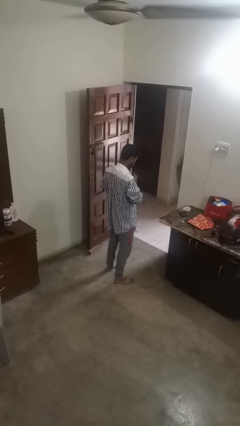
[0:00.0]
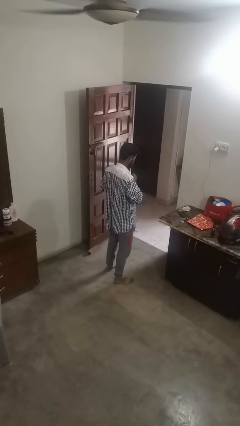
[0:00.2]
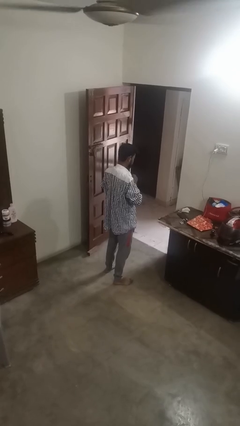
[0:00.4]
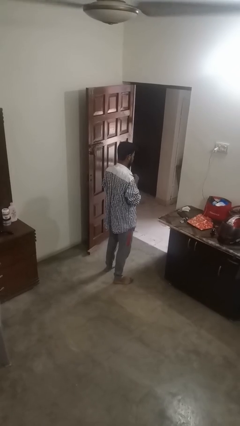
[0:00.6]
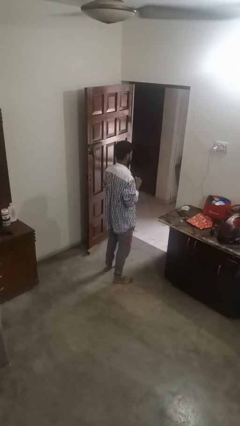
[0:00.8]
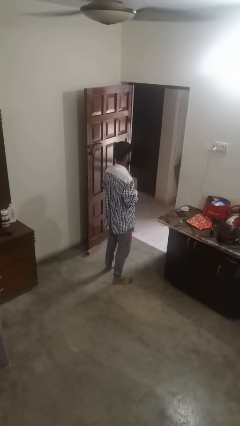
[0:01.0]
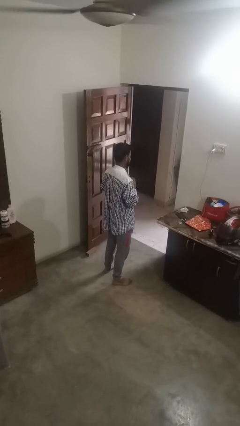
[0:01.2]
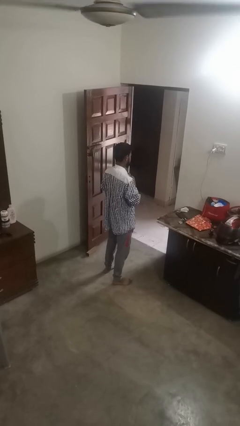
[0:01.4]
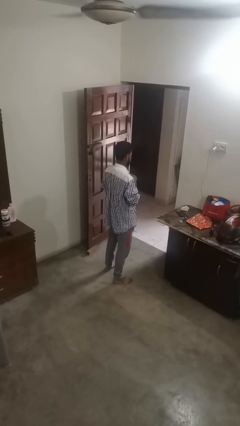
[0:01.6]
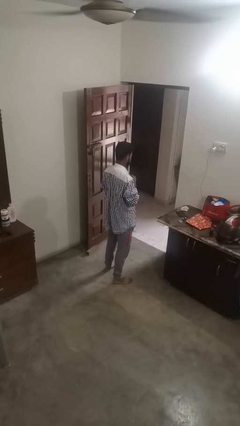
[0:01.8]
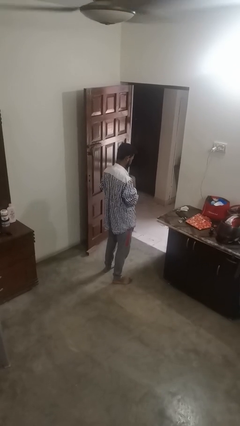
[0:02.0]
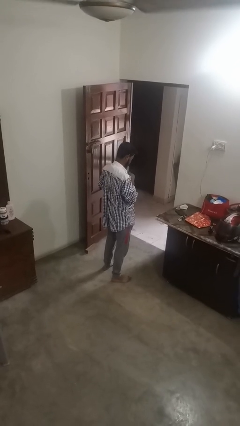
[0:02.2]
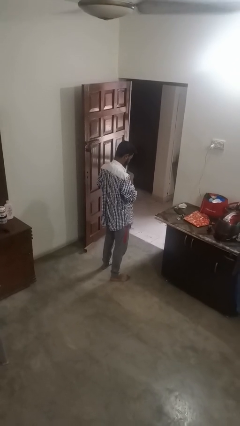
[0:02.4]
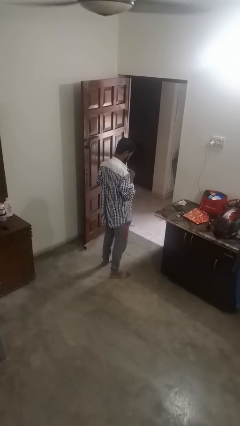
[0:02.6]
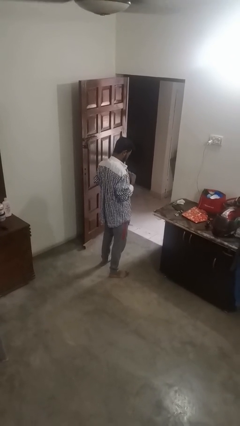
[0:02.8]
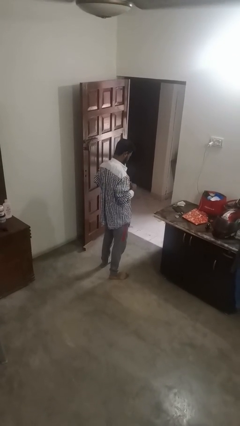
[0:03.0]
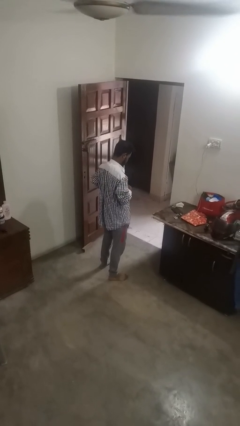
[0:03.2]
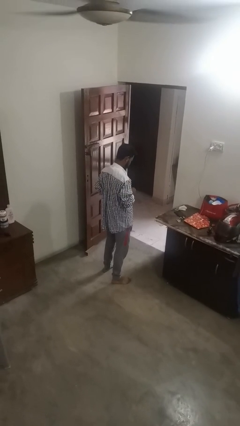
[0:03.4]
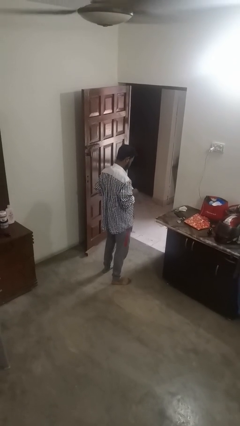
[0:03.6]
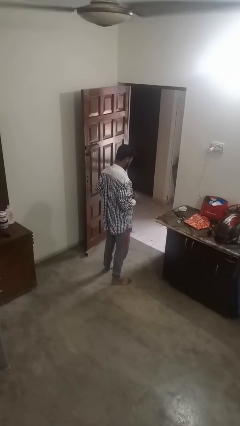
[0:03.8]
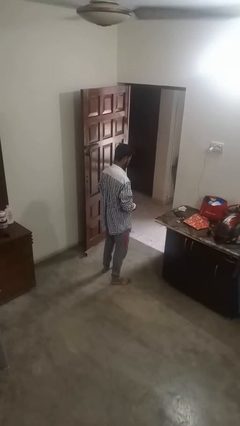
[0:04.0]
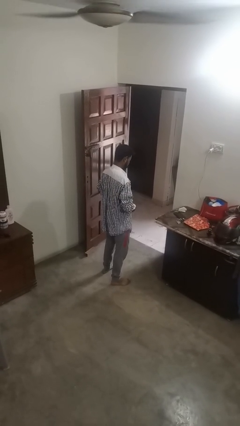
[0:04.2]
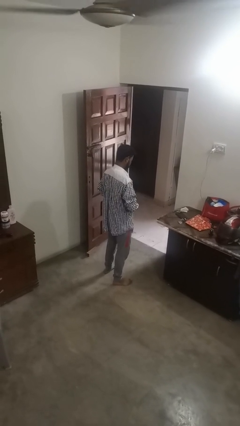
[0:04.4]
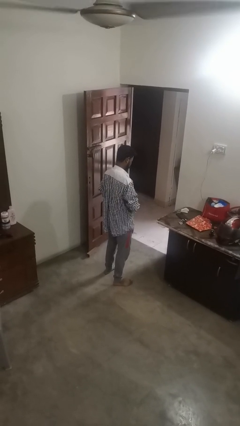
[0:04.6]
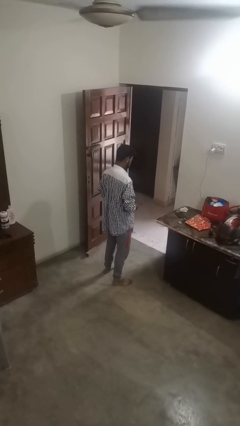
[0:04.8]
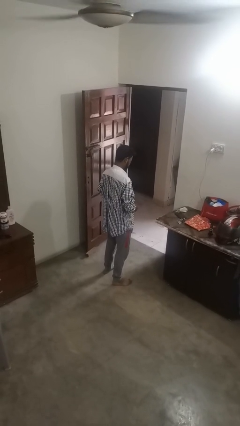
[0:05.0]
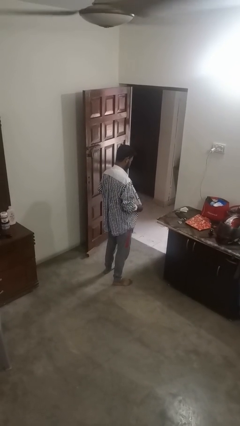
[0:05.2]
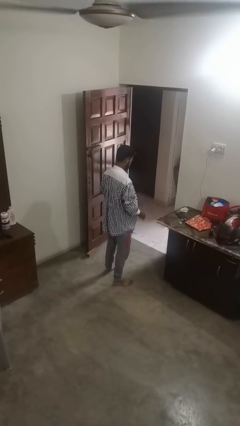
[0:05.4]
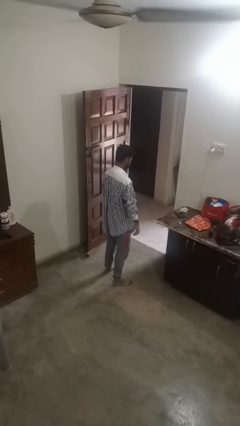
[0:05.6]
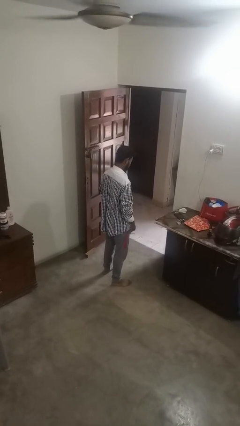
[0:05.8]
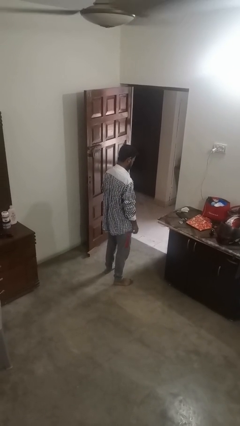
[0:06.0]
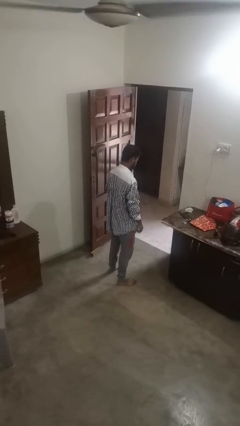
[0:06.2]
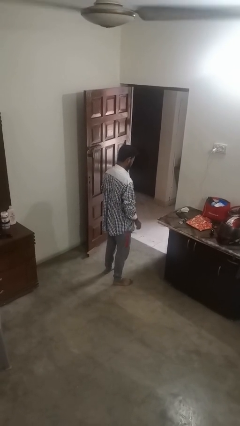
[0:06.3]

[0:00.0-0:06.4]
person unbuttons shirt

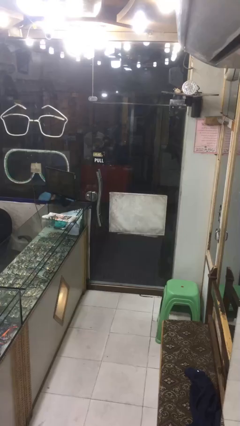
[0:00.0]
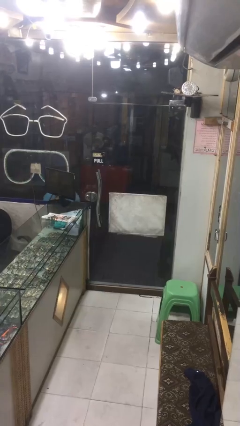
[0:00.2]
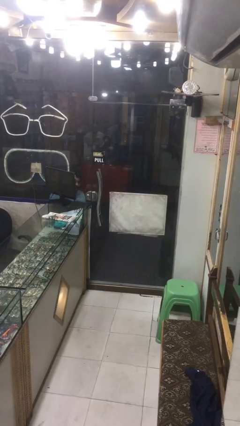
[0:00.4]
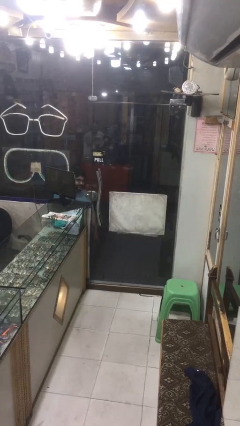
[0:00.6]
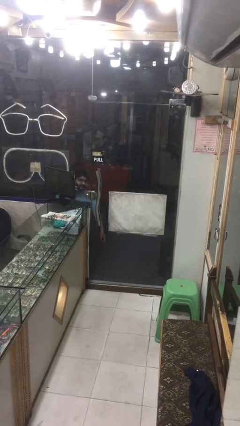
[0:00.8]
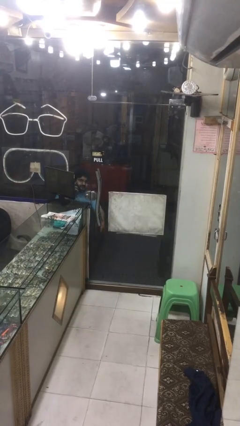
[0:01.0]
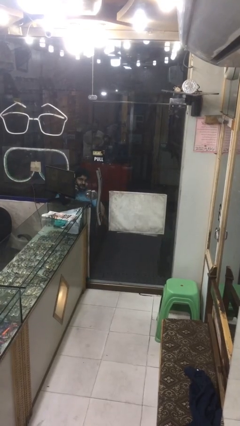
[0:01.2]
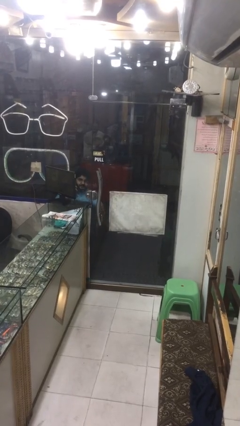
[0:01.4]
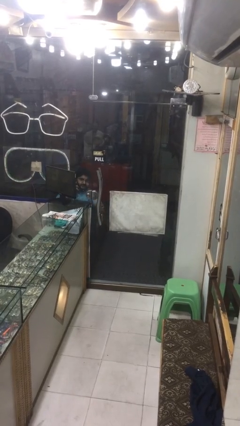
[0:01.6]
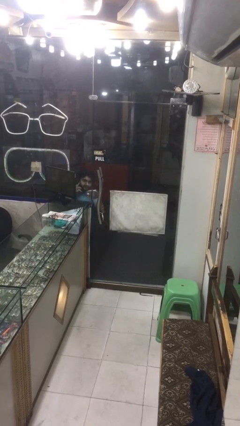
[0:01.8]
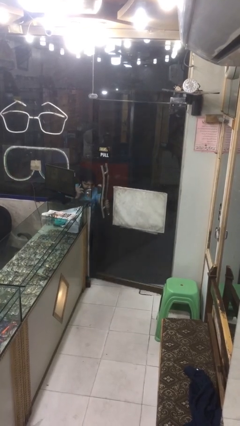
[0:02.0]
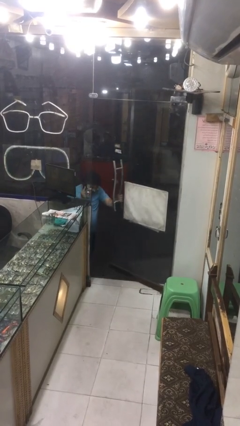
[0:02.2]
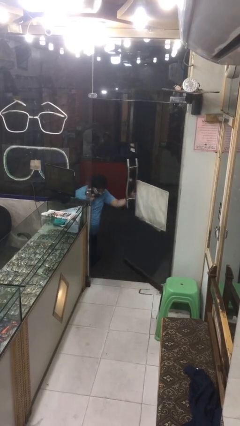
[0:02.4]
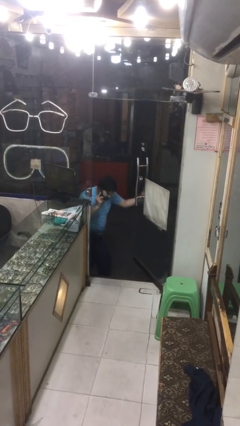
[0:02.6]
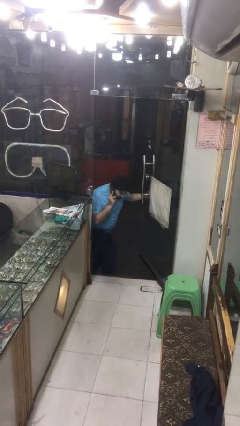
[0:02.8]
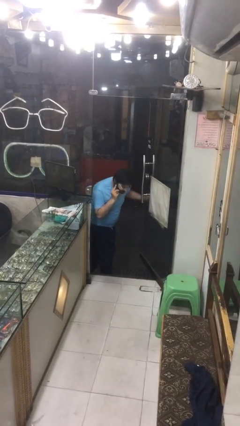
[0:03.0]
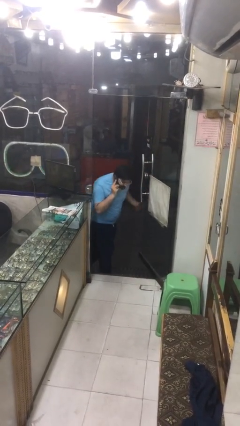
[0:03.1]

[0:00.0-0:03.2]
person opens facility door

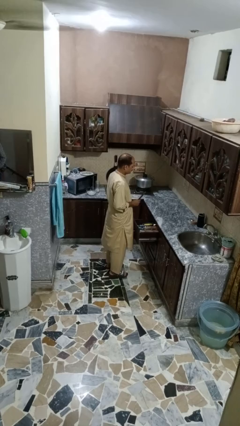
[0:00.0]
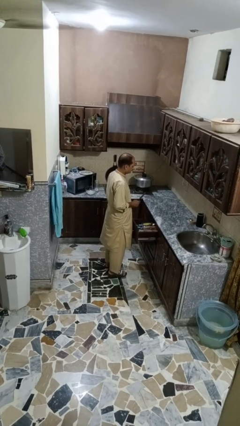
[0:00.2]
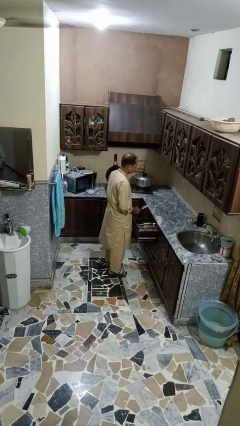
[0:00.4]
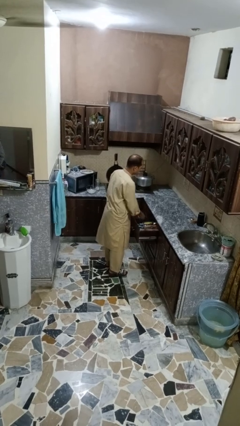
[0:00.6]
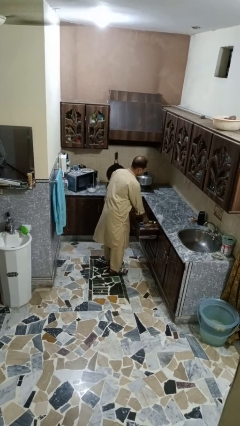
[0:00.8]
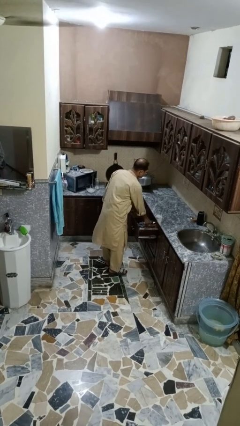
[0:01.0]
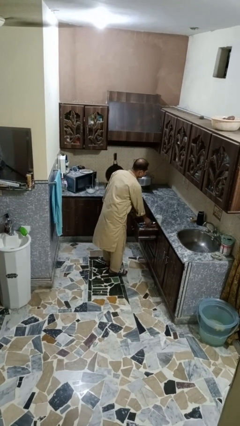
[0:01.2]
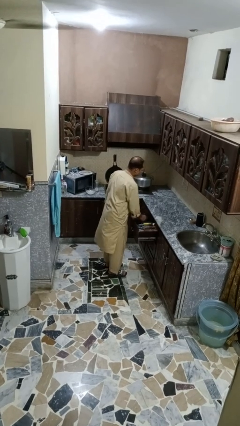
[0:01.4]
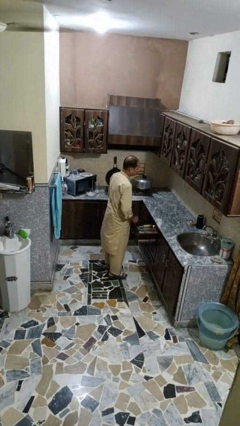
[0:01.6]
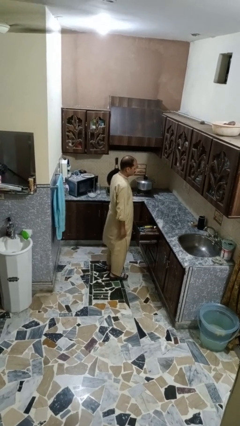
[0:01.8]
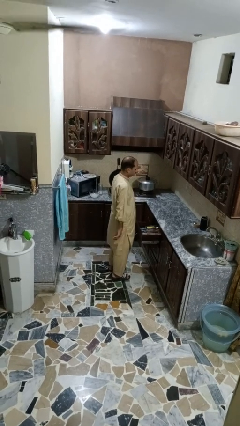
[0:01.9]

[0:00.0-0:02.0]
person puts object into kitchen drawer

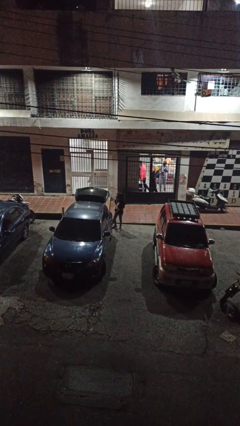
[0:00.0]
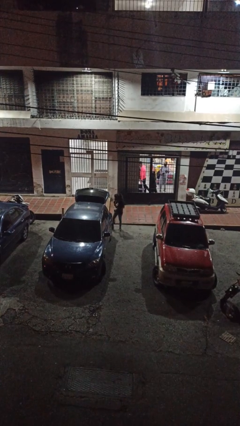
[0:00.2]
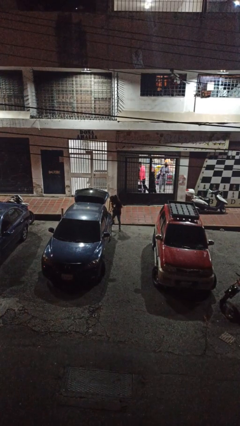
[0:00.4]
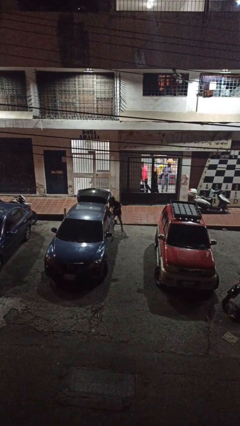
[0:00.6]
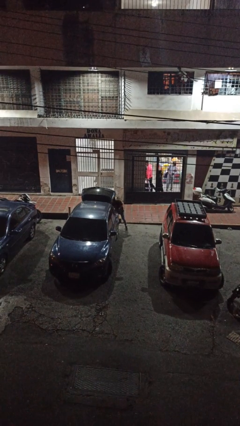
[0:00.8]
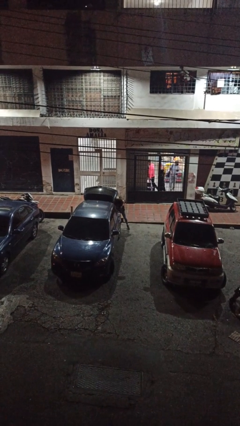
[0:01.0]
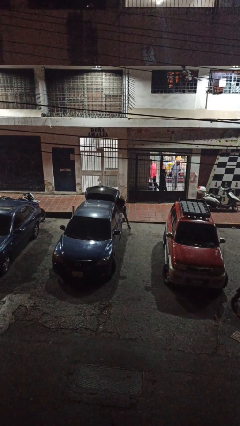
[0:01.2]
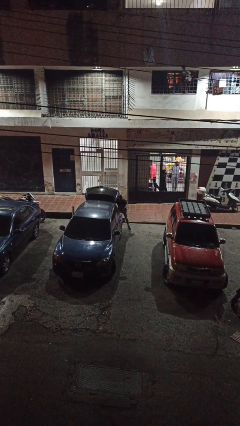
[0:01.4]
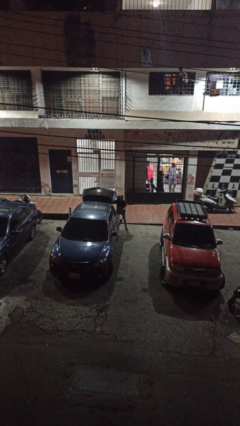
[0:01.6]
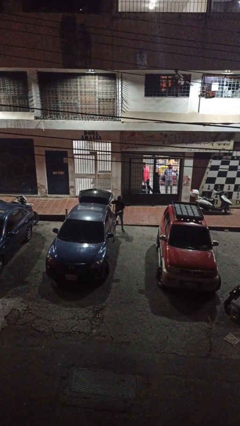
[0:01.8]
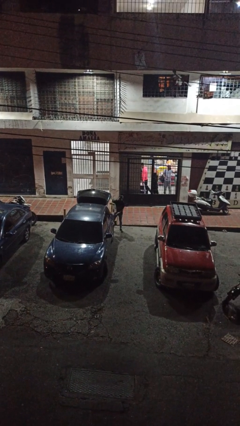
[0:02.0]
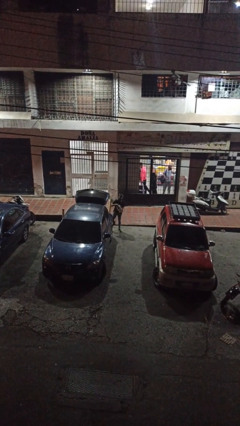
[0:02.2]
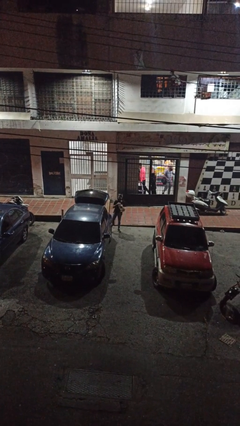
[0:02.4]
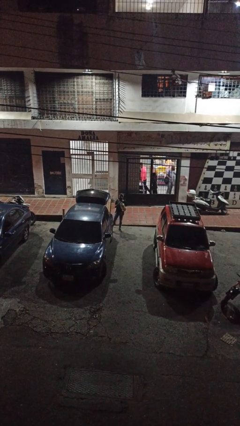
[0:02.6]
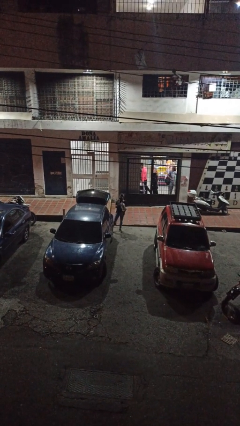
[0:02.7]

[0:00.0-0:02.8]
person unloads car

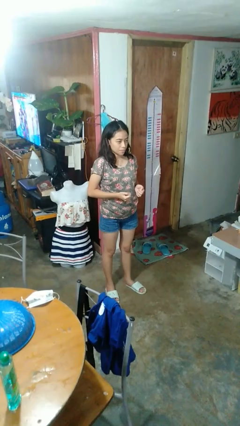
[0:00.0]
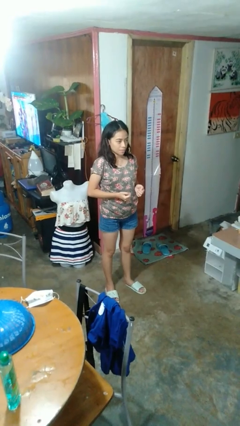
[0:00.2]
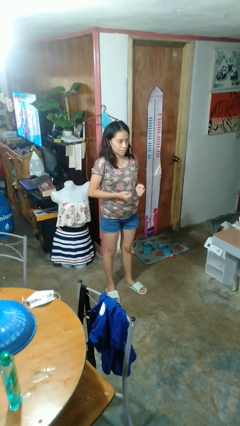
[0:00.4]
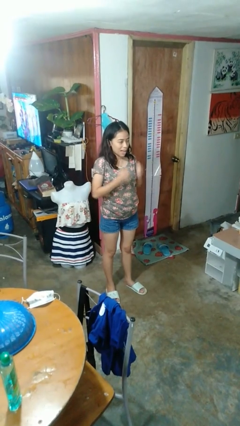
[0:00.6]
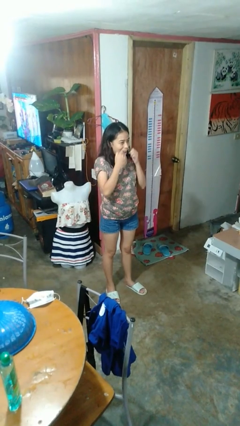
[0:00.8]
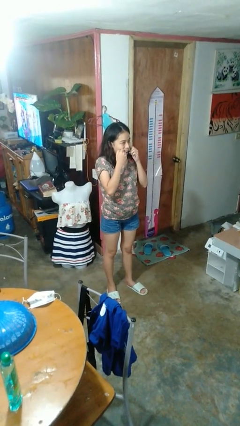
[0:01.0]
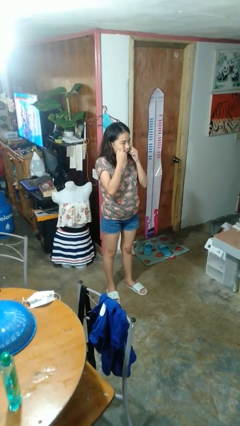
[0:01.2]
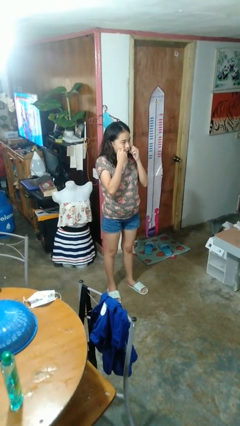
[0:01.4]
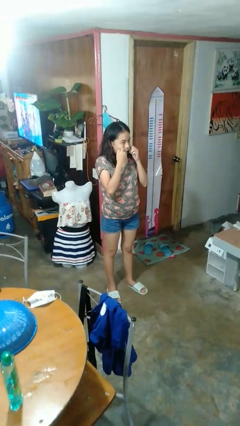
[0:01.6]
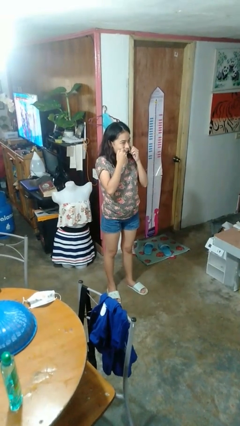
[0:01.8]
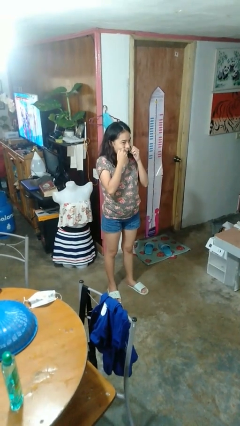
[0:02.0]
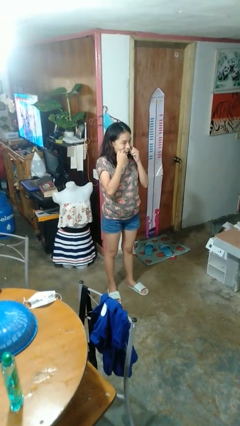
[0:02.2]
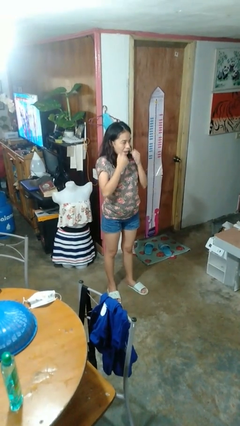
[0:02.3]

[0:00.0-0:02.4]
person flosses

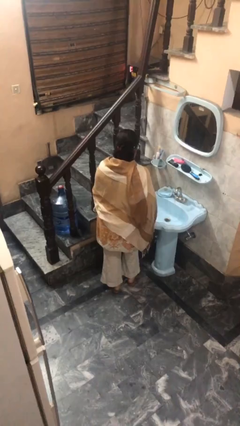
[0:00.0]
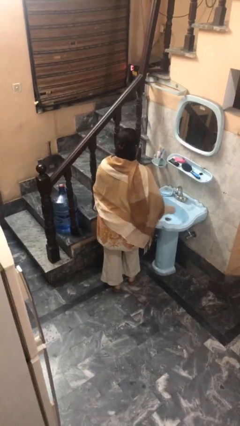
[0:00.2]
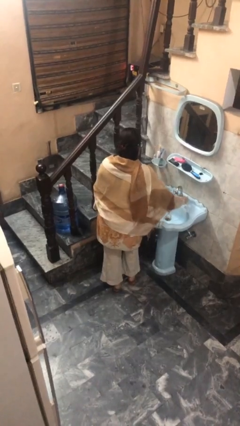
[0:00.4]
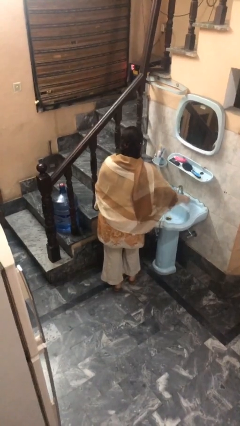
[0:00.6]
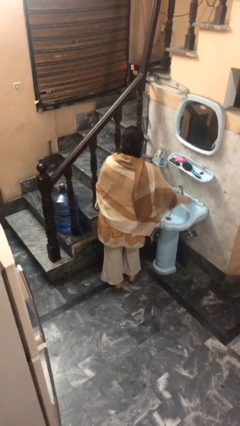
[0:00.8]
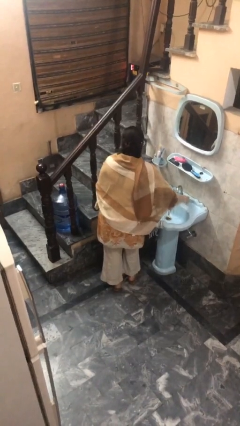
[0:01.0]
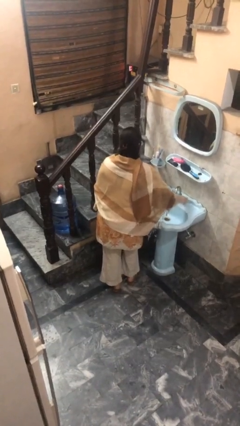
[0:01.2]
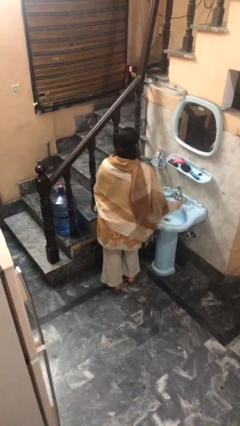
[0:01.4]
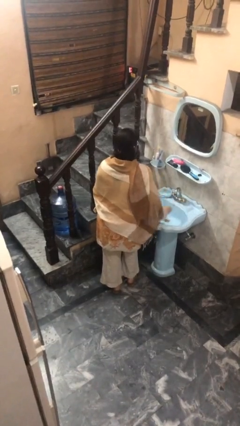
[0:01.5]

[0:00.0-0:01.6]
person turns off faucet
